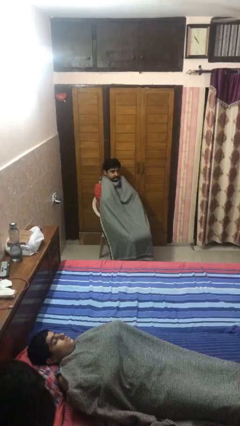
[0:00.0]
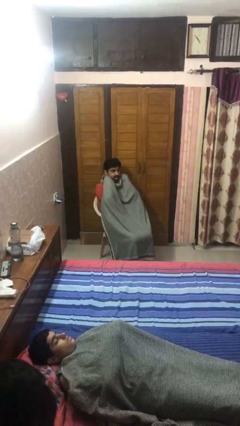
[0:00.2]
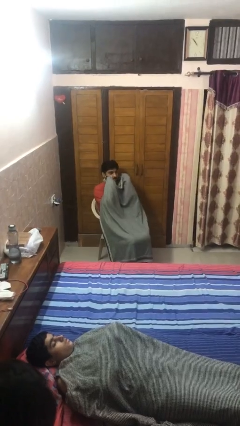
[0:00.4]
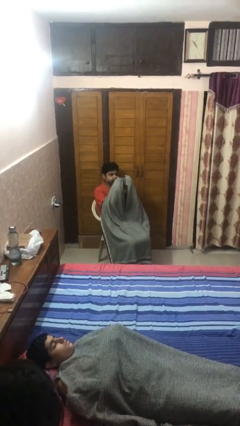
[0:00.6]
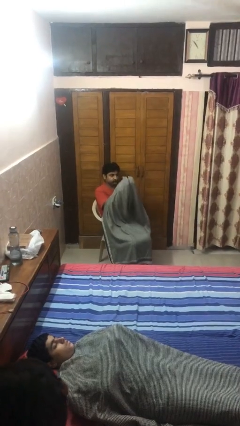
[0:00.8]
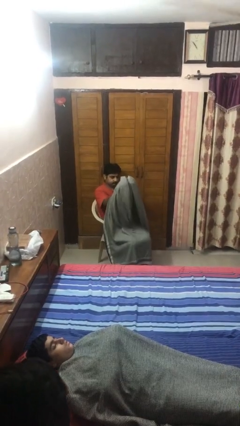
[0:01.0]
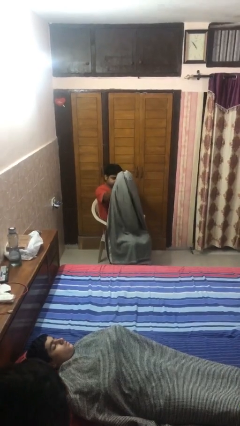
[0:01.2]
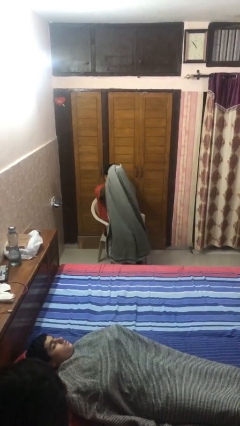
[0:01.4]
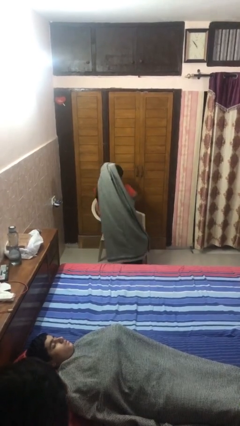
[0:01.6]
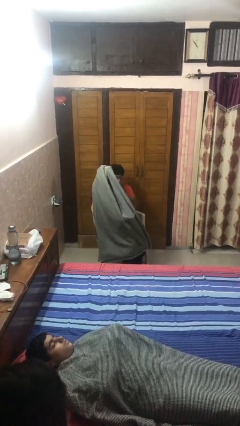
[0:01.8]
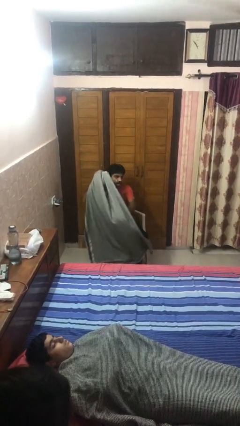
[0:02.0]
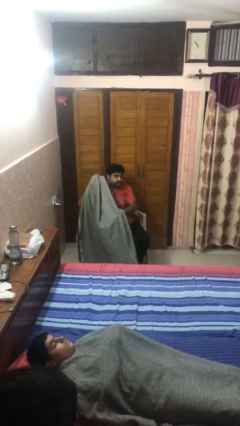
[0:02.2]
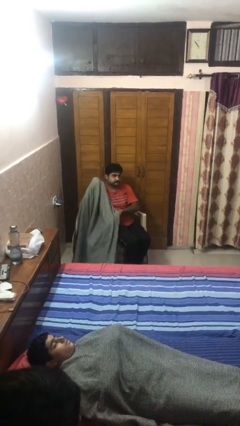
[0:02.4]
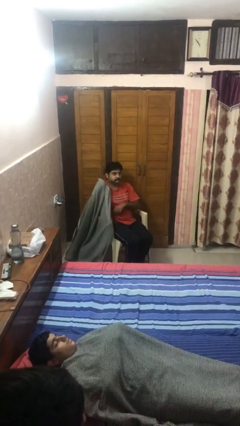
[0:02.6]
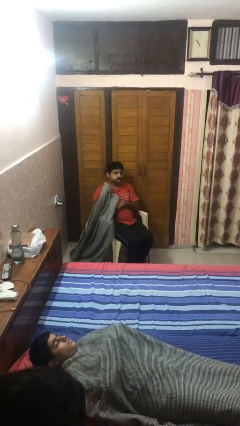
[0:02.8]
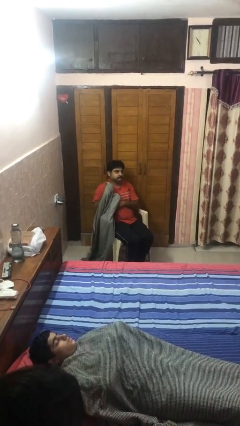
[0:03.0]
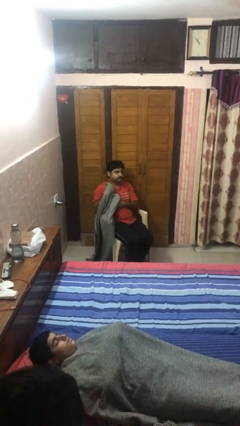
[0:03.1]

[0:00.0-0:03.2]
person uncovers with blanket

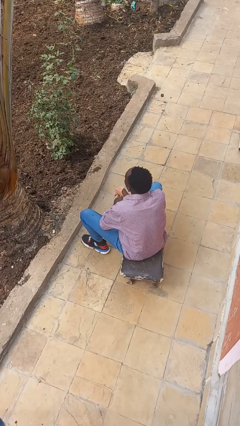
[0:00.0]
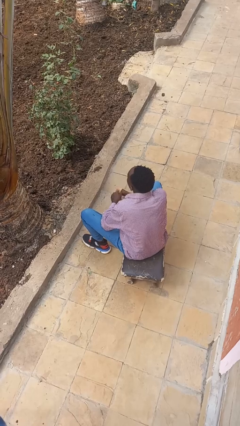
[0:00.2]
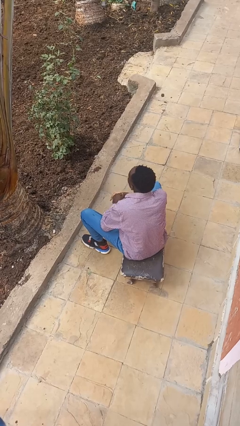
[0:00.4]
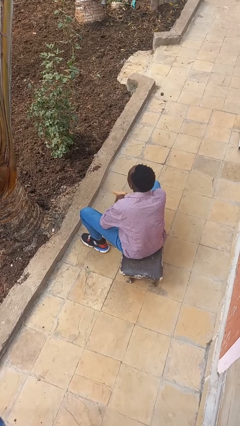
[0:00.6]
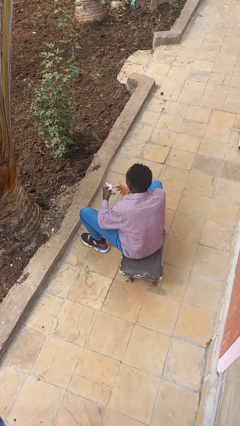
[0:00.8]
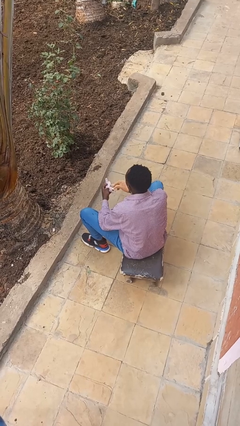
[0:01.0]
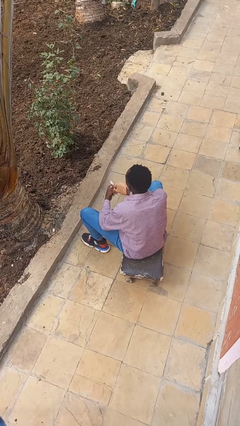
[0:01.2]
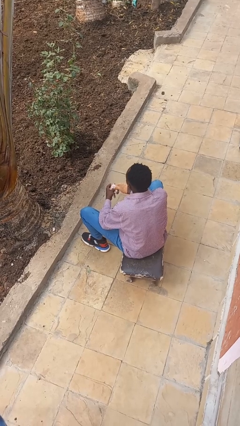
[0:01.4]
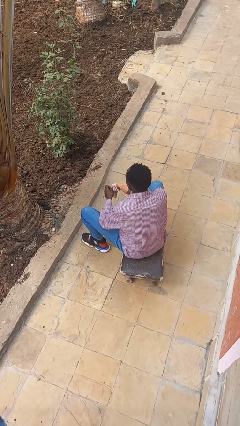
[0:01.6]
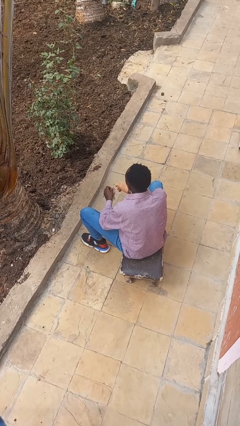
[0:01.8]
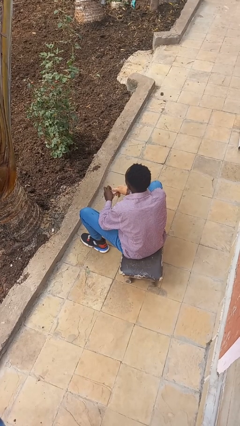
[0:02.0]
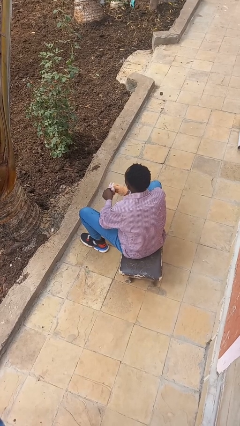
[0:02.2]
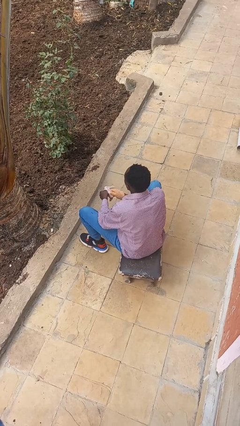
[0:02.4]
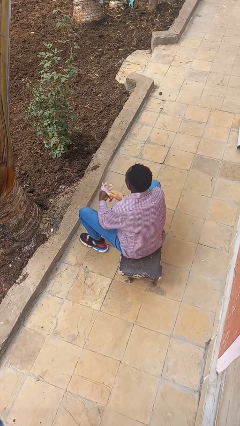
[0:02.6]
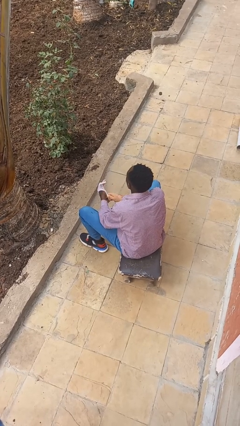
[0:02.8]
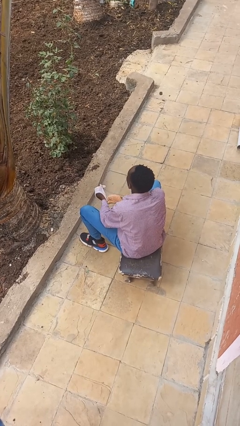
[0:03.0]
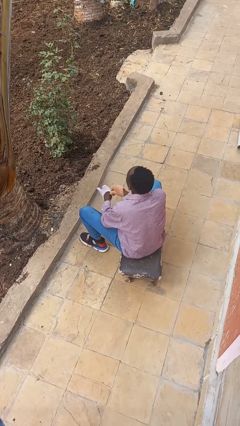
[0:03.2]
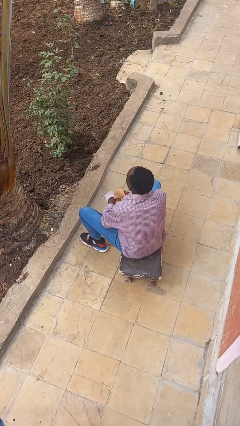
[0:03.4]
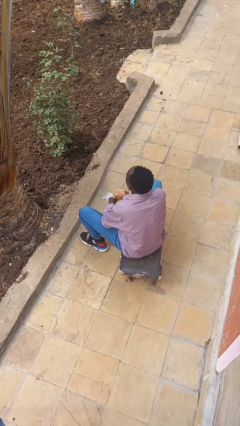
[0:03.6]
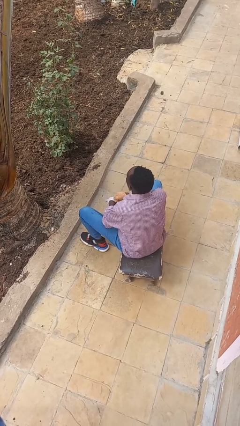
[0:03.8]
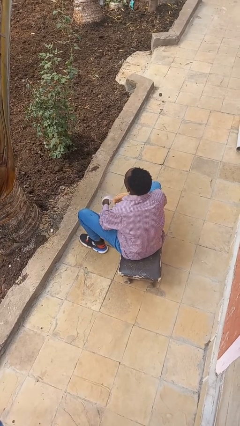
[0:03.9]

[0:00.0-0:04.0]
person puts on gloves

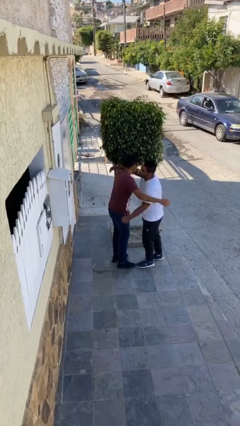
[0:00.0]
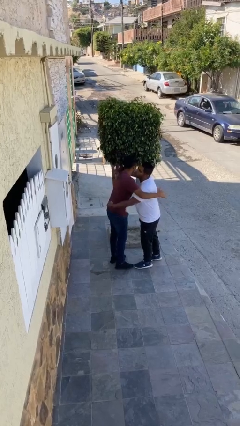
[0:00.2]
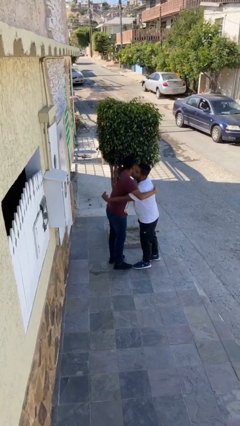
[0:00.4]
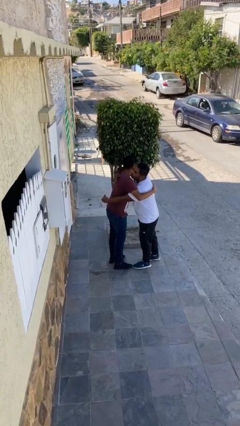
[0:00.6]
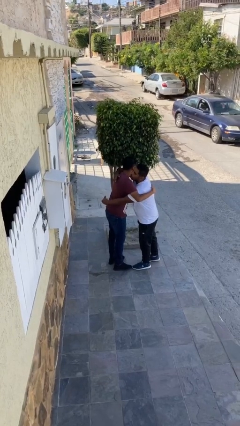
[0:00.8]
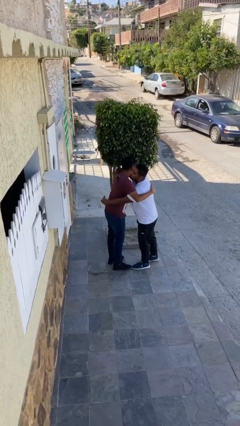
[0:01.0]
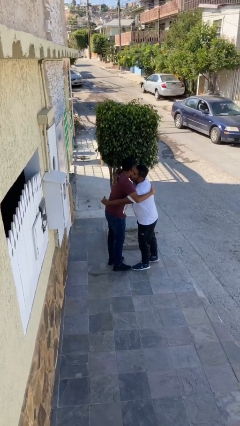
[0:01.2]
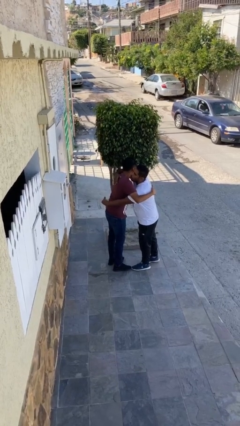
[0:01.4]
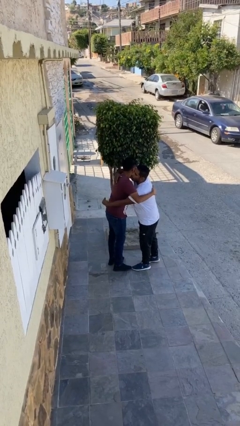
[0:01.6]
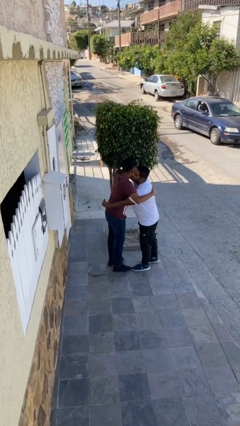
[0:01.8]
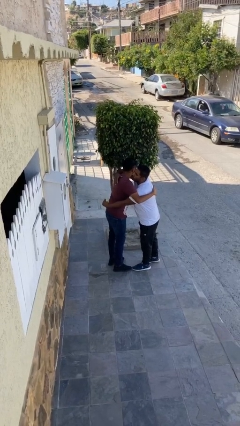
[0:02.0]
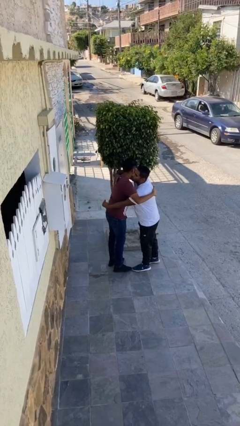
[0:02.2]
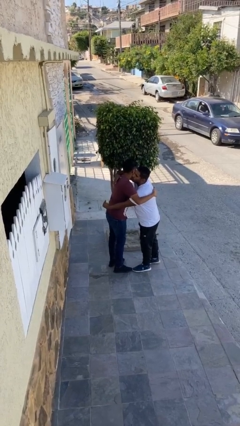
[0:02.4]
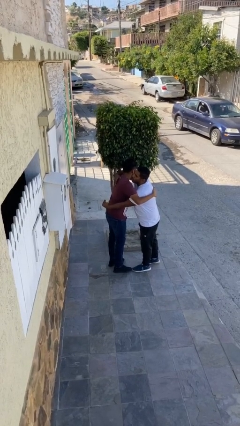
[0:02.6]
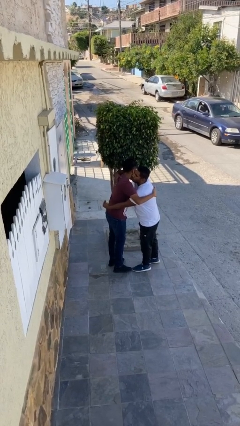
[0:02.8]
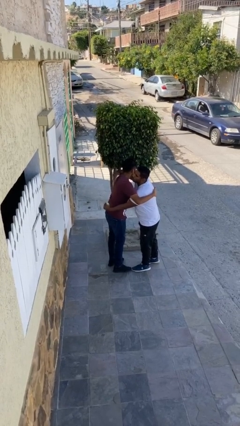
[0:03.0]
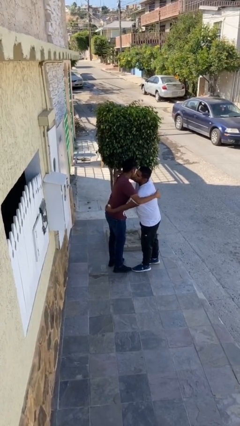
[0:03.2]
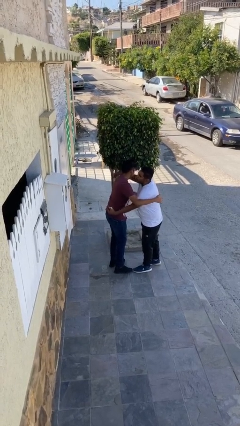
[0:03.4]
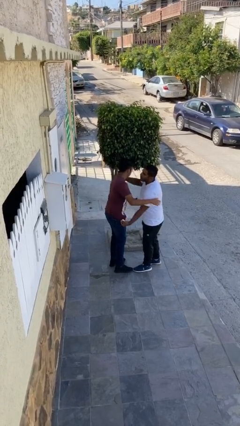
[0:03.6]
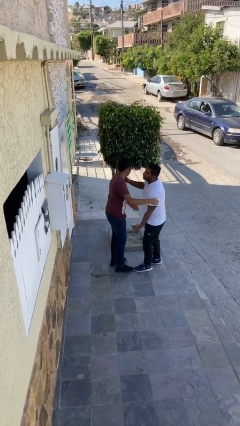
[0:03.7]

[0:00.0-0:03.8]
person embraces person

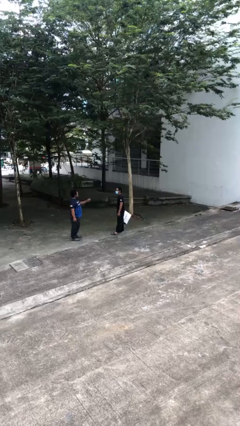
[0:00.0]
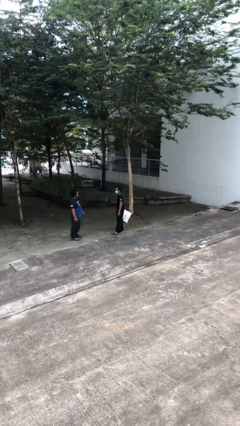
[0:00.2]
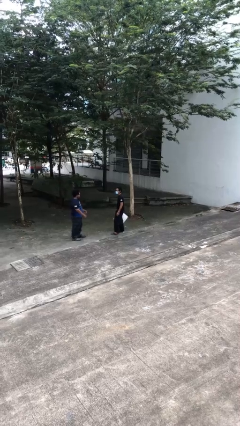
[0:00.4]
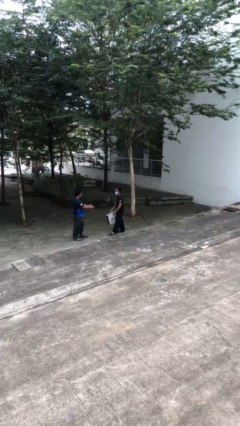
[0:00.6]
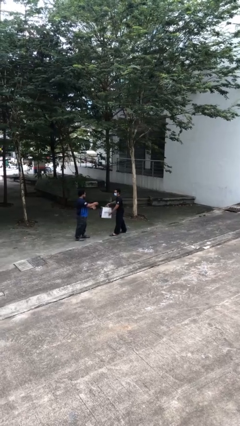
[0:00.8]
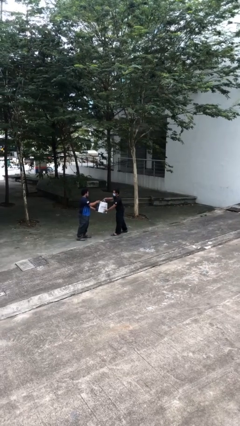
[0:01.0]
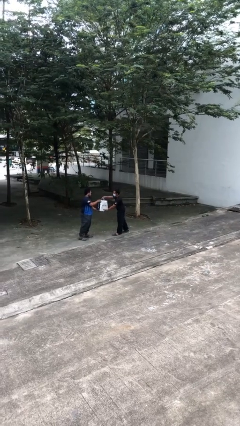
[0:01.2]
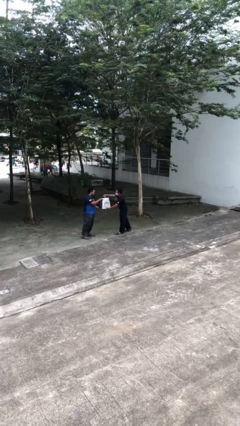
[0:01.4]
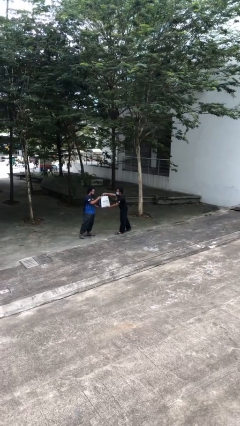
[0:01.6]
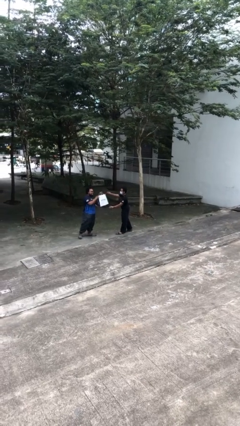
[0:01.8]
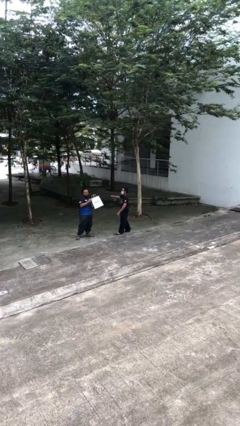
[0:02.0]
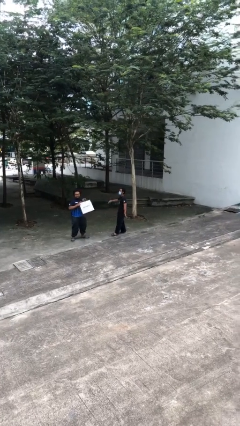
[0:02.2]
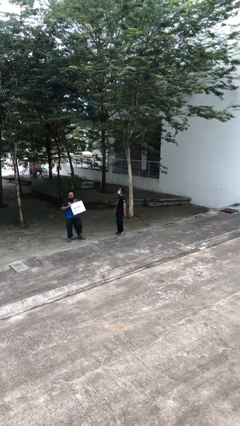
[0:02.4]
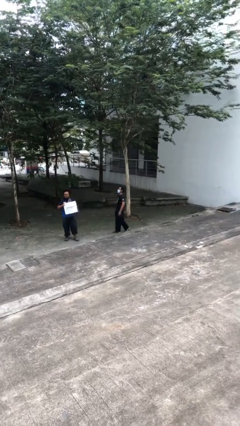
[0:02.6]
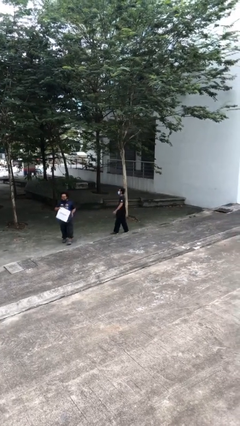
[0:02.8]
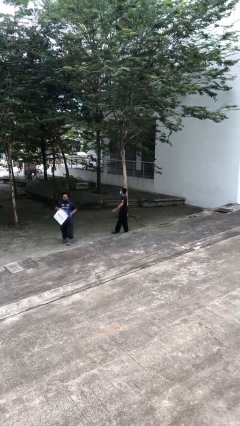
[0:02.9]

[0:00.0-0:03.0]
person transfers object to person

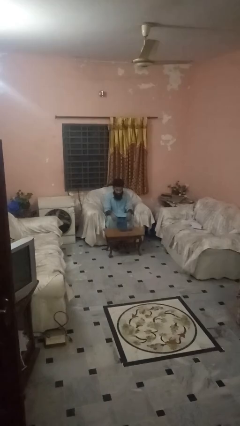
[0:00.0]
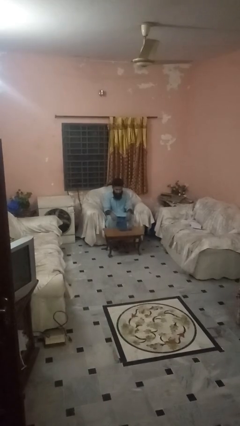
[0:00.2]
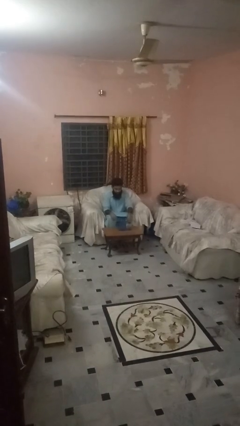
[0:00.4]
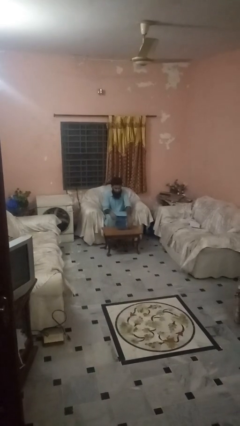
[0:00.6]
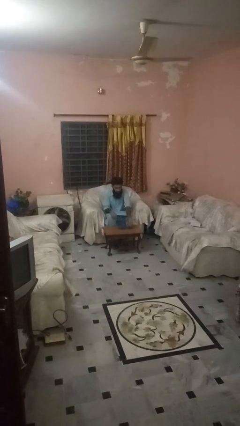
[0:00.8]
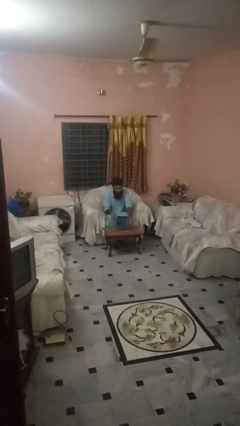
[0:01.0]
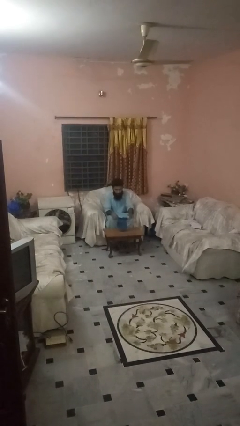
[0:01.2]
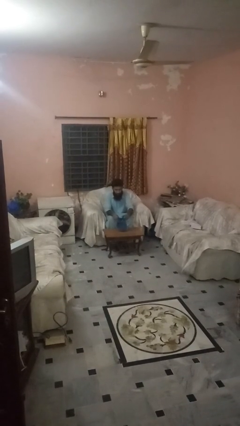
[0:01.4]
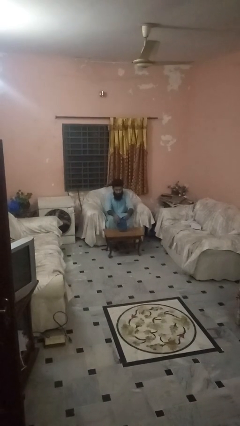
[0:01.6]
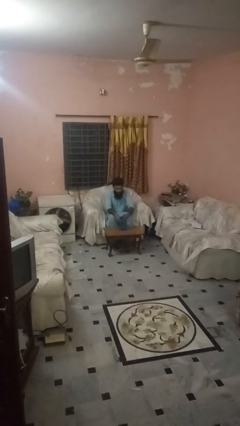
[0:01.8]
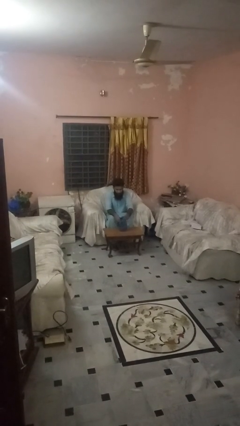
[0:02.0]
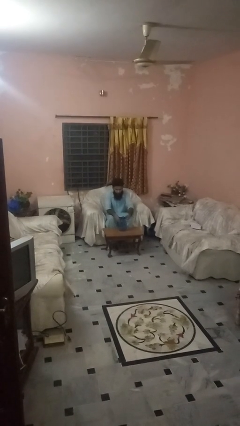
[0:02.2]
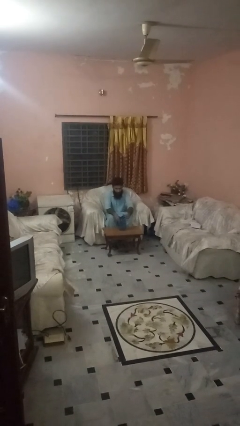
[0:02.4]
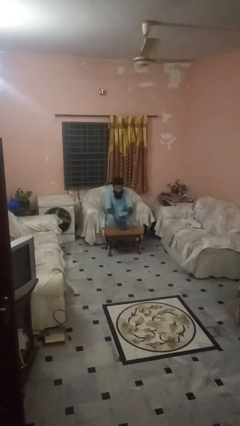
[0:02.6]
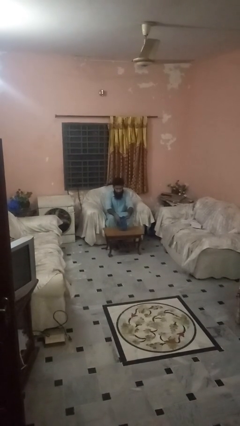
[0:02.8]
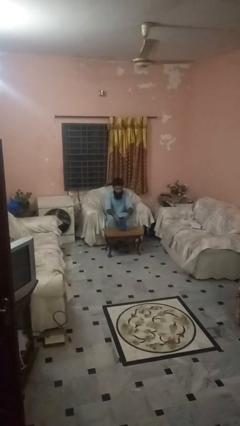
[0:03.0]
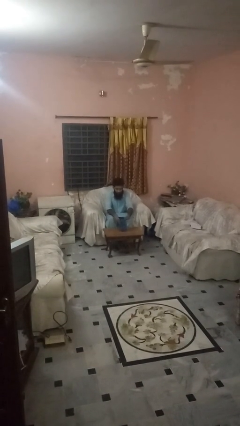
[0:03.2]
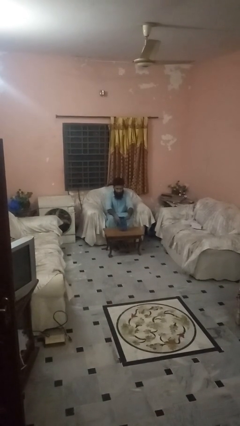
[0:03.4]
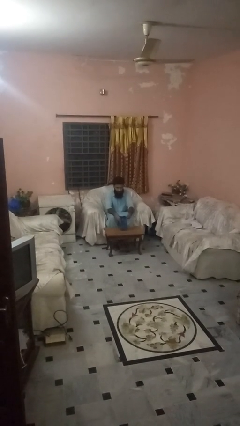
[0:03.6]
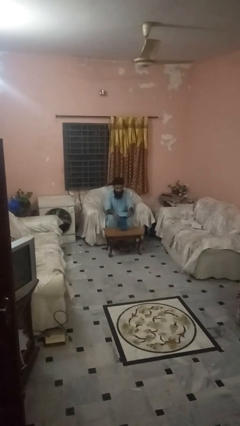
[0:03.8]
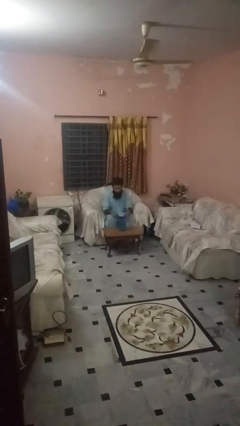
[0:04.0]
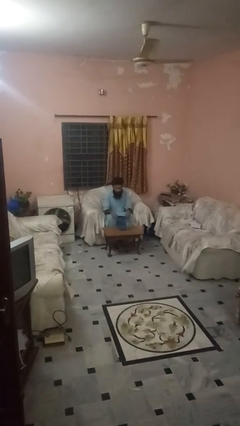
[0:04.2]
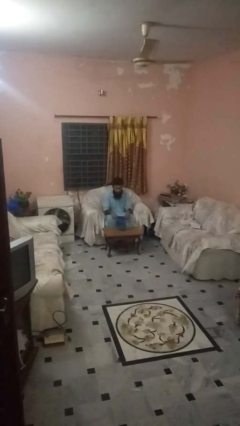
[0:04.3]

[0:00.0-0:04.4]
person screws lid to bottle
